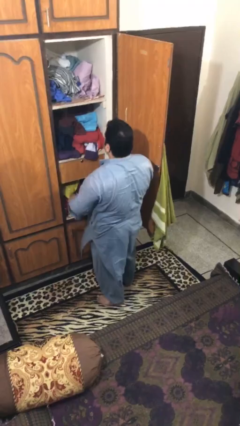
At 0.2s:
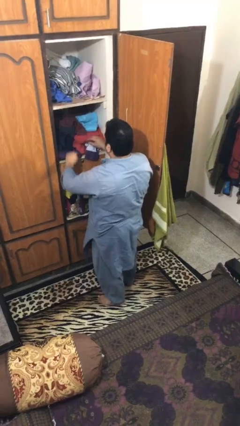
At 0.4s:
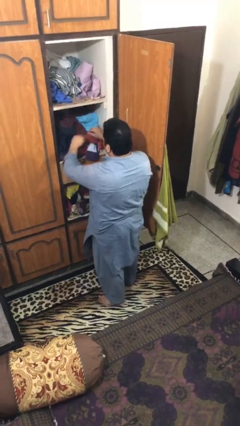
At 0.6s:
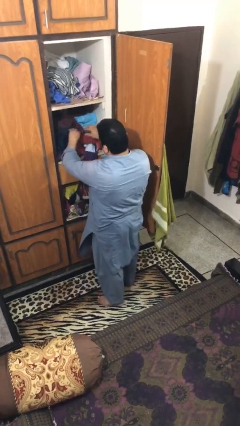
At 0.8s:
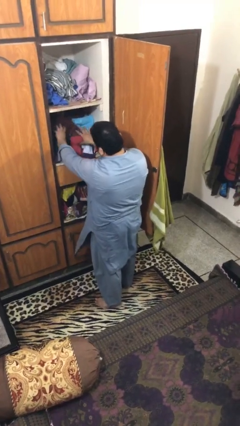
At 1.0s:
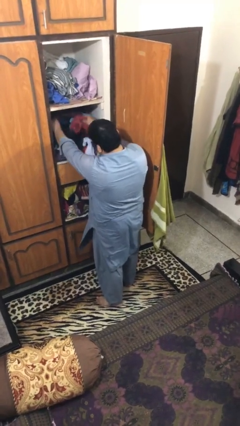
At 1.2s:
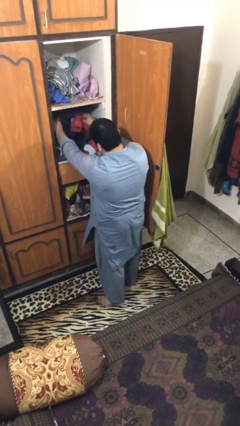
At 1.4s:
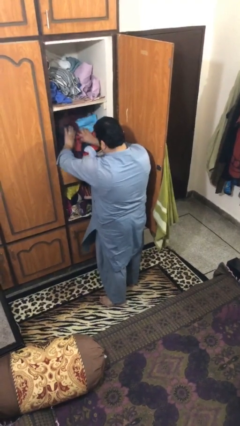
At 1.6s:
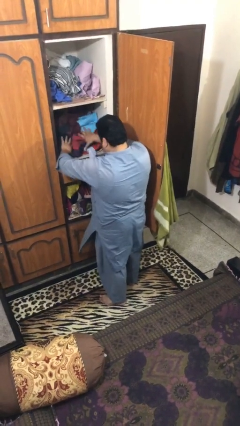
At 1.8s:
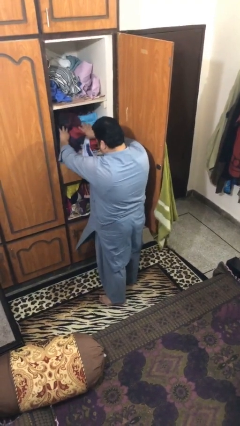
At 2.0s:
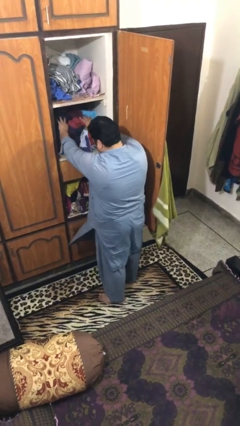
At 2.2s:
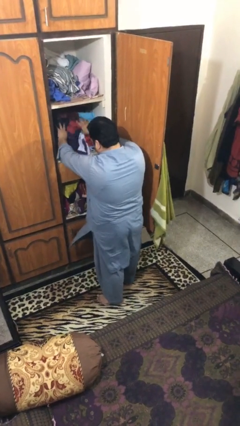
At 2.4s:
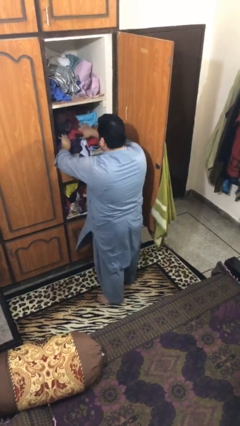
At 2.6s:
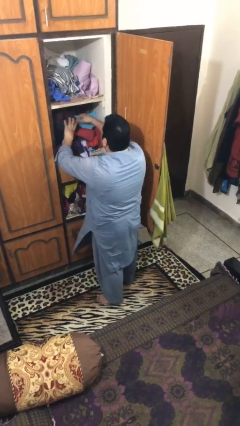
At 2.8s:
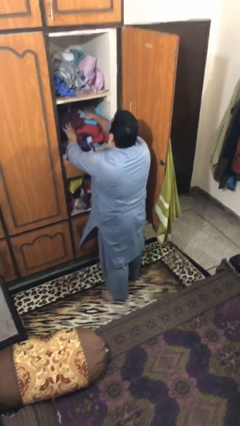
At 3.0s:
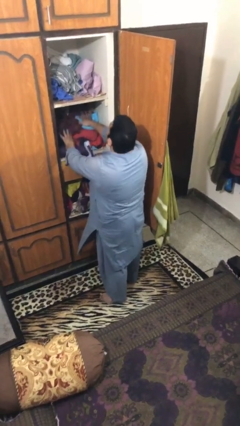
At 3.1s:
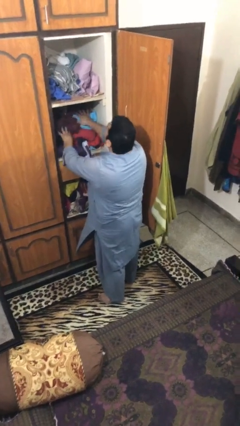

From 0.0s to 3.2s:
person searches in cabinet

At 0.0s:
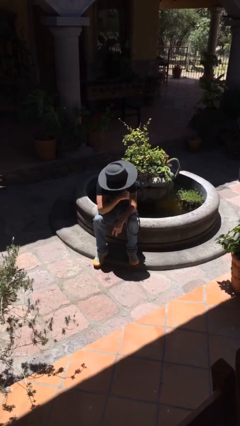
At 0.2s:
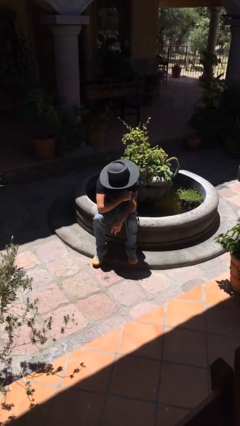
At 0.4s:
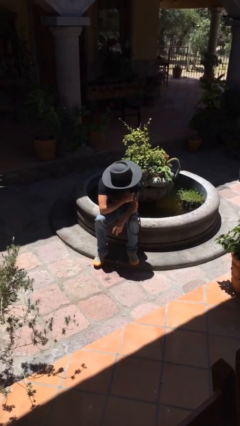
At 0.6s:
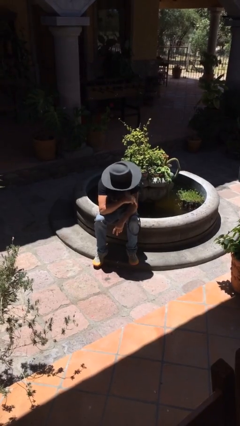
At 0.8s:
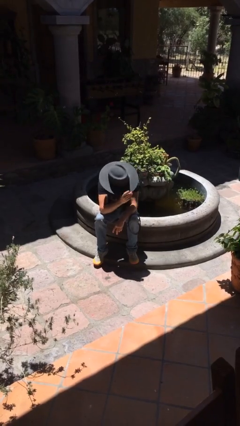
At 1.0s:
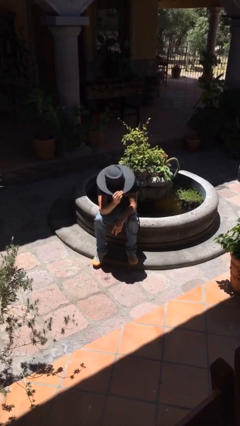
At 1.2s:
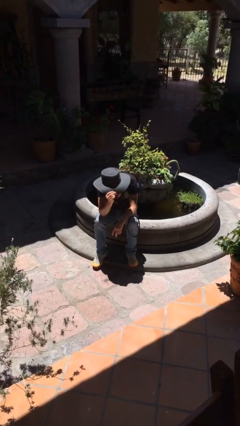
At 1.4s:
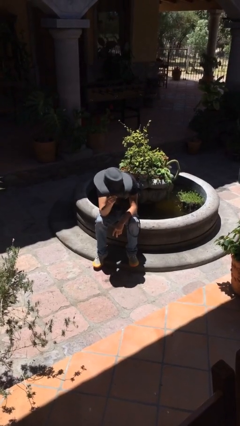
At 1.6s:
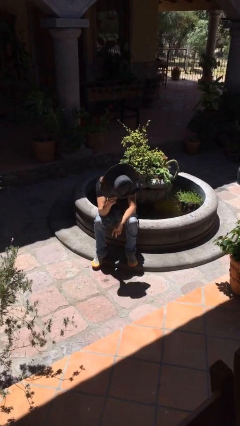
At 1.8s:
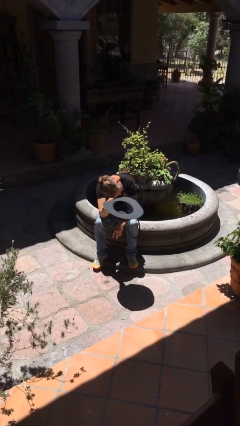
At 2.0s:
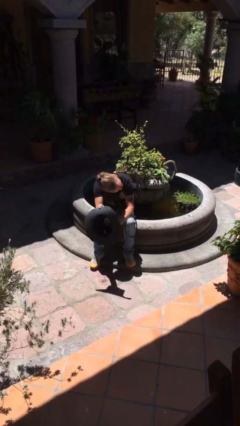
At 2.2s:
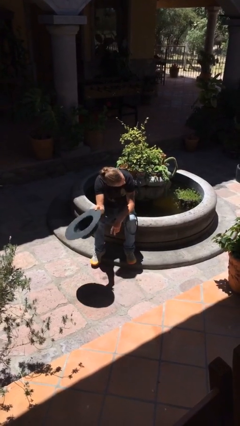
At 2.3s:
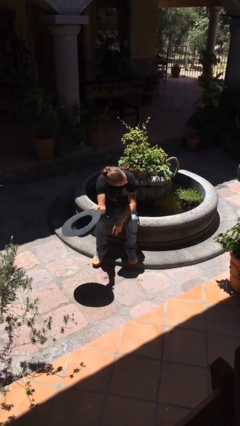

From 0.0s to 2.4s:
person takes off hat

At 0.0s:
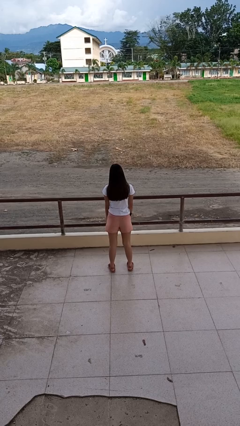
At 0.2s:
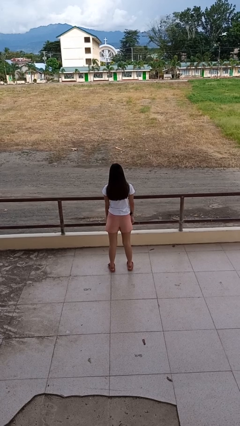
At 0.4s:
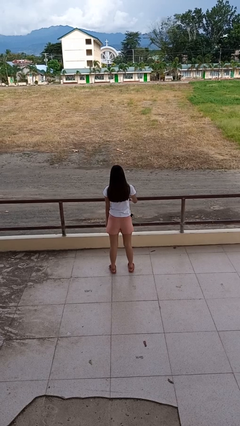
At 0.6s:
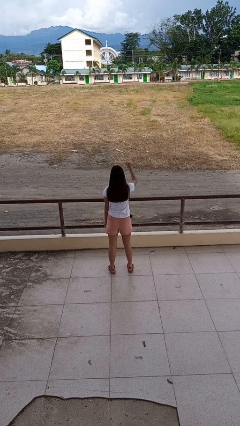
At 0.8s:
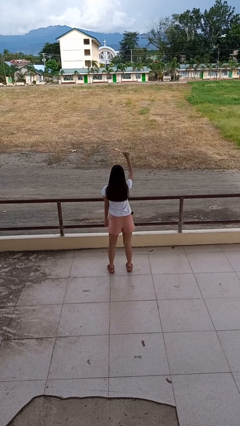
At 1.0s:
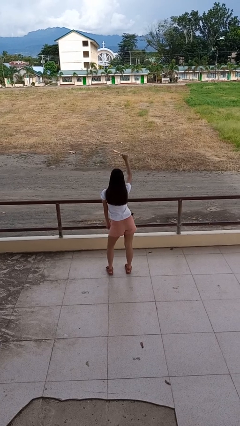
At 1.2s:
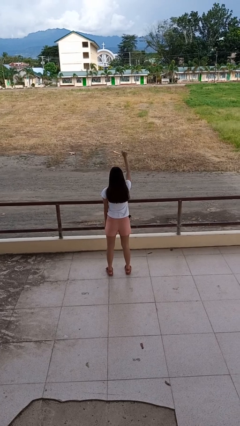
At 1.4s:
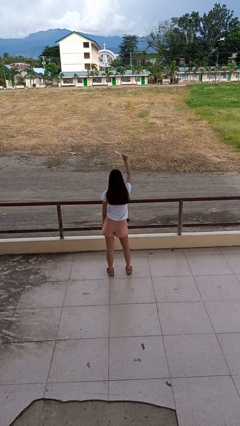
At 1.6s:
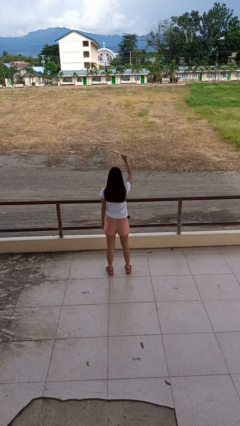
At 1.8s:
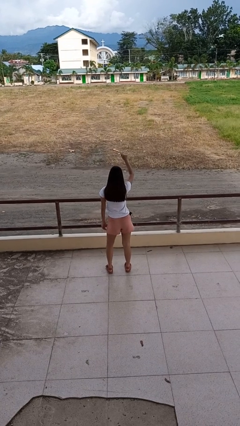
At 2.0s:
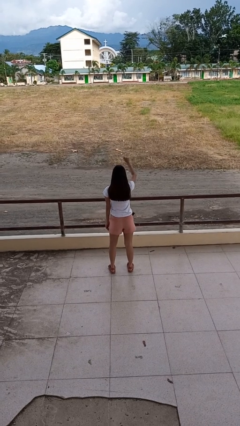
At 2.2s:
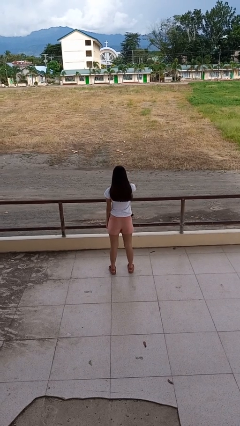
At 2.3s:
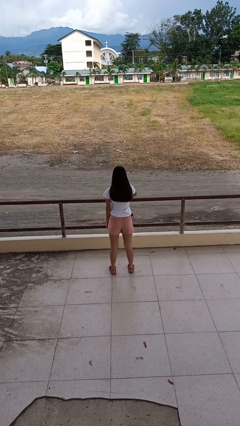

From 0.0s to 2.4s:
person dances in place

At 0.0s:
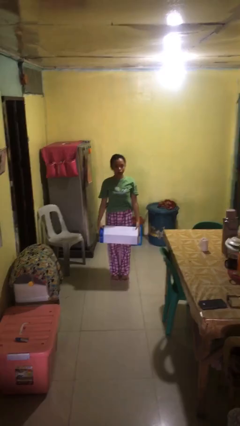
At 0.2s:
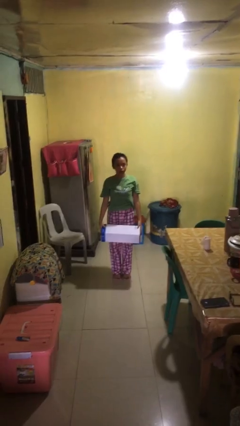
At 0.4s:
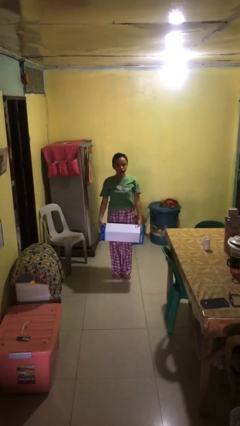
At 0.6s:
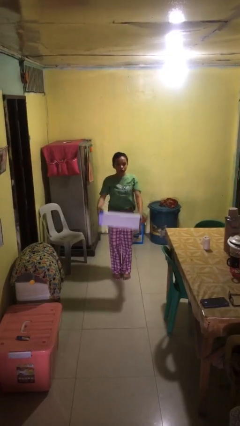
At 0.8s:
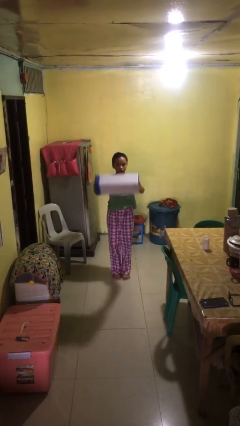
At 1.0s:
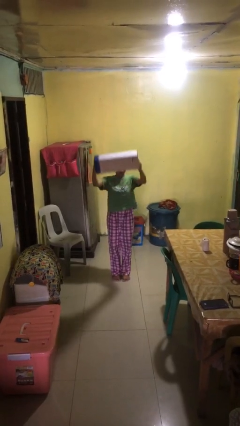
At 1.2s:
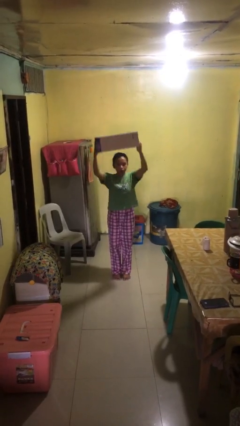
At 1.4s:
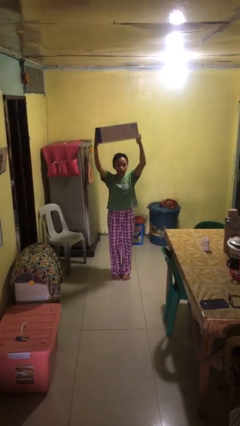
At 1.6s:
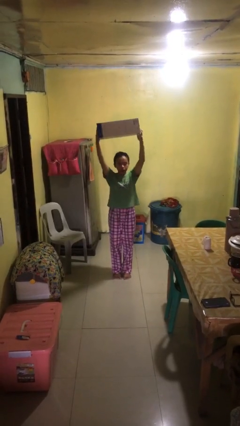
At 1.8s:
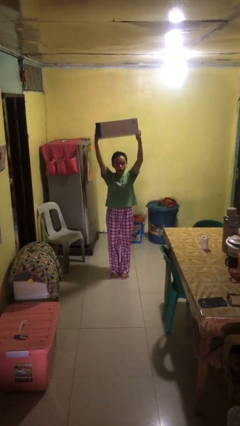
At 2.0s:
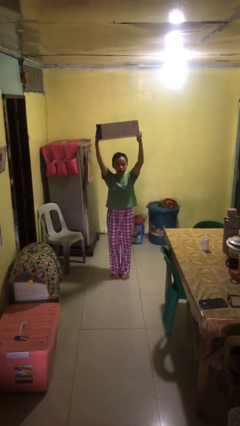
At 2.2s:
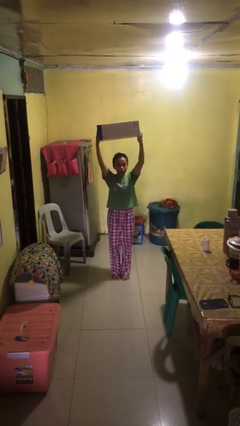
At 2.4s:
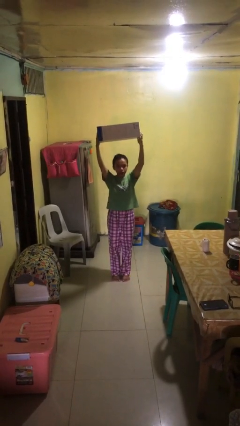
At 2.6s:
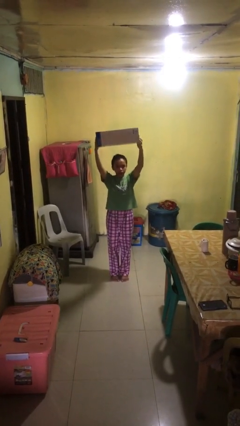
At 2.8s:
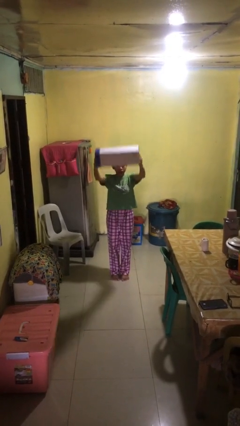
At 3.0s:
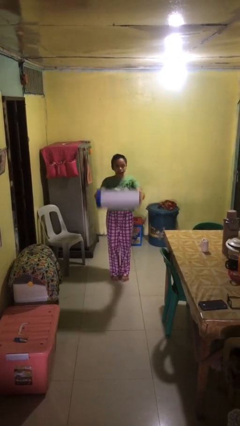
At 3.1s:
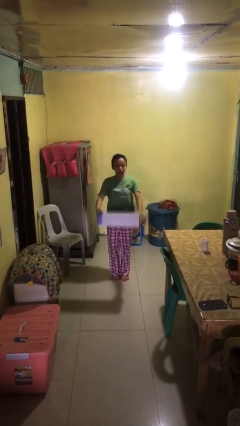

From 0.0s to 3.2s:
person holds object above head

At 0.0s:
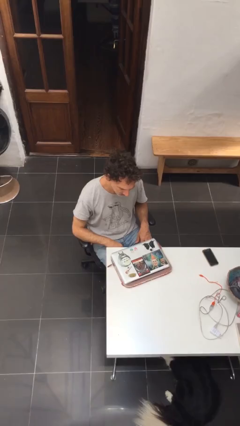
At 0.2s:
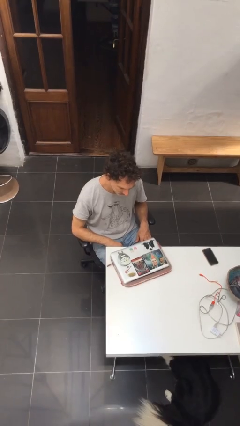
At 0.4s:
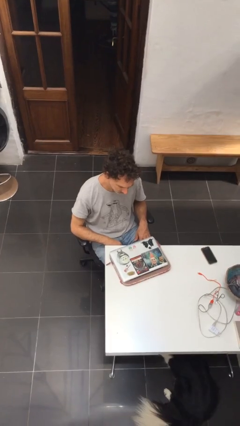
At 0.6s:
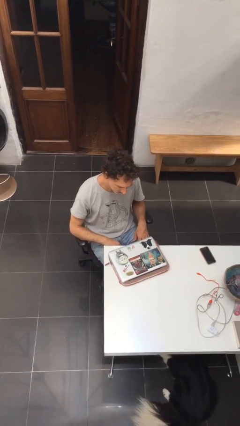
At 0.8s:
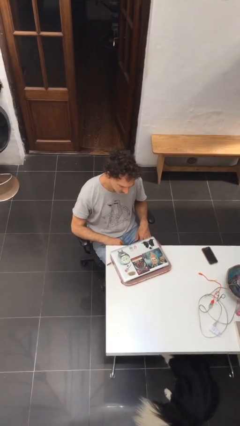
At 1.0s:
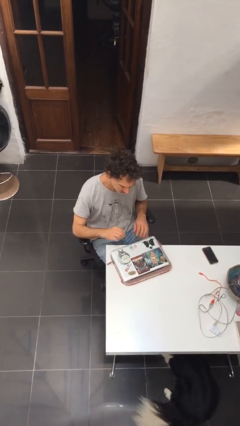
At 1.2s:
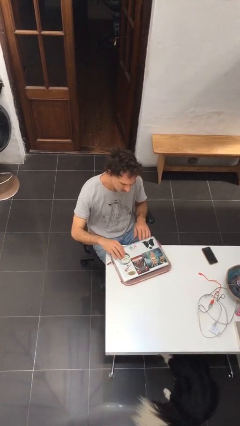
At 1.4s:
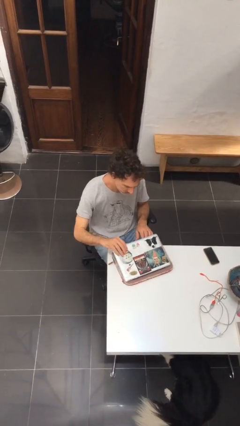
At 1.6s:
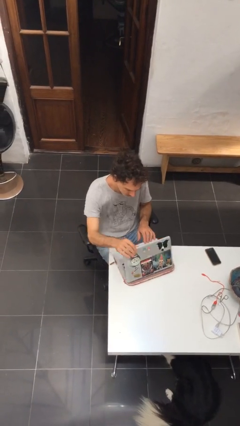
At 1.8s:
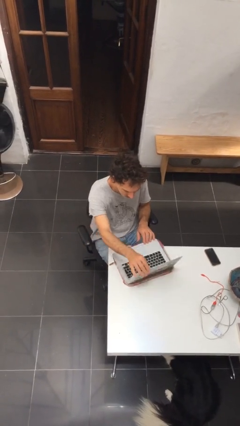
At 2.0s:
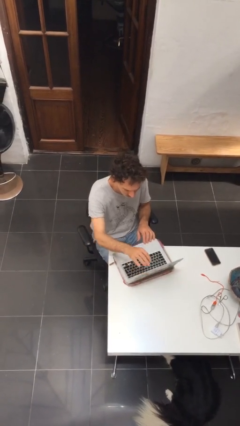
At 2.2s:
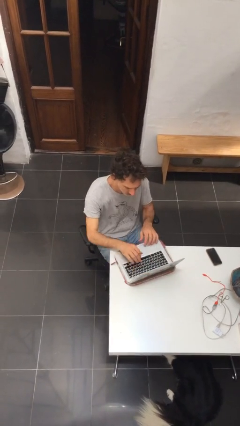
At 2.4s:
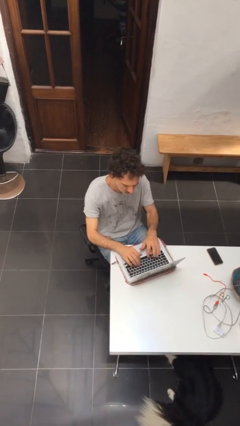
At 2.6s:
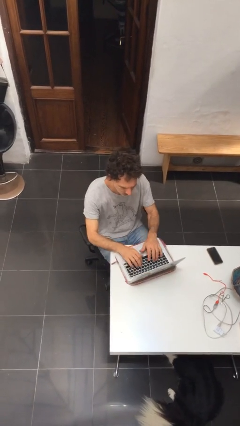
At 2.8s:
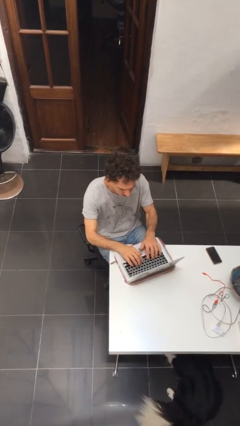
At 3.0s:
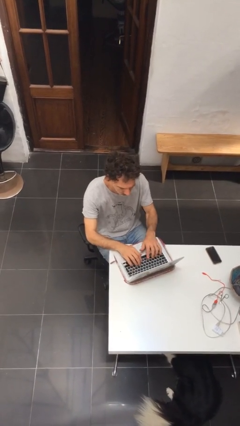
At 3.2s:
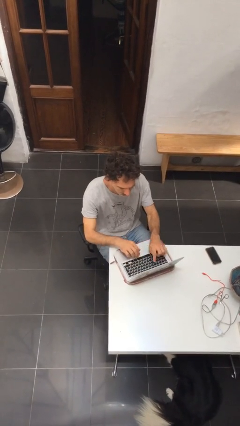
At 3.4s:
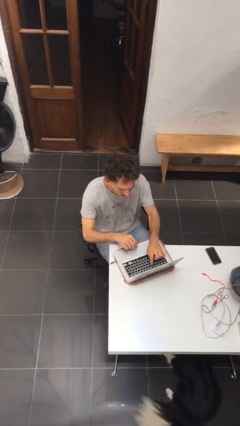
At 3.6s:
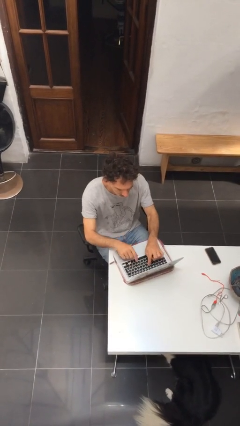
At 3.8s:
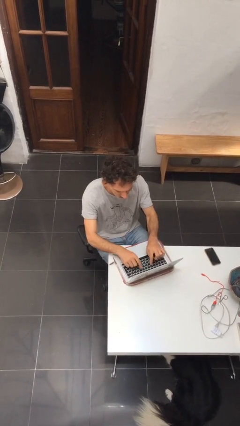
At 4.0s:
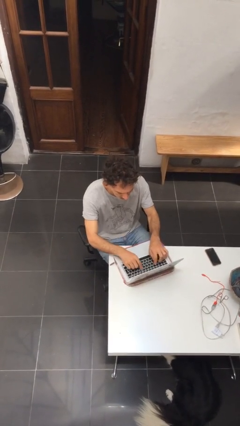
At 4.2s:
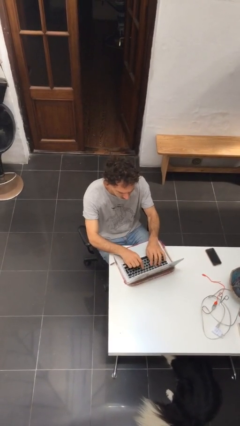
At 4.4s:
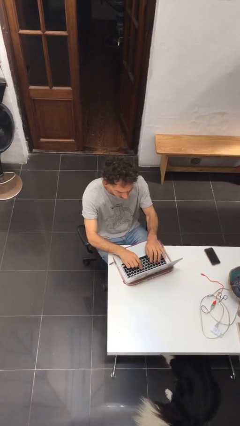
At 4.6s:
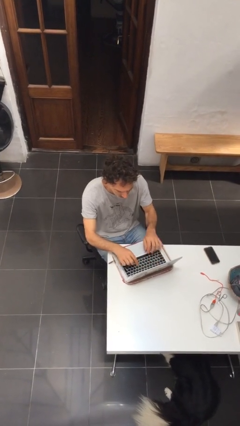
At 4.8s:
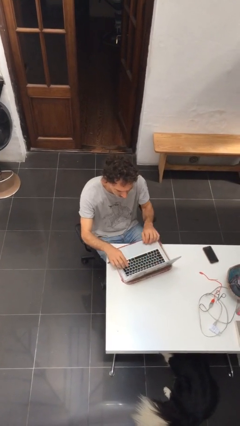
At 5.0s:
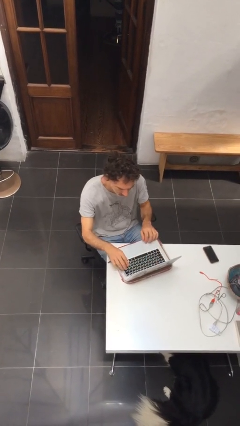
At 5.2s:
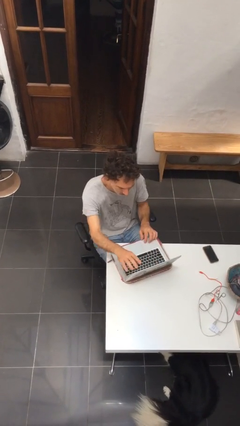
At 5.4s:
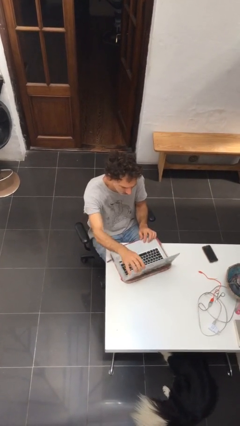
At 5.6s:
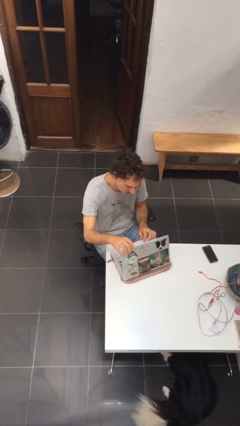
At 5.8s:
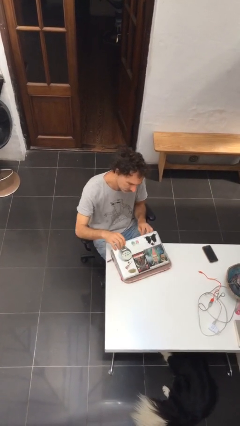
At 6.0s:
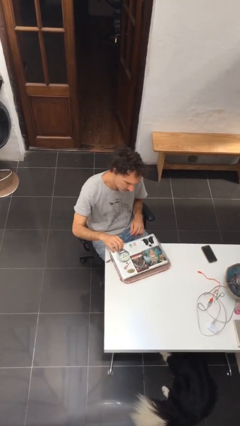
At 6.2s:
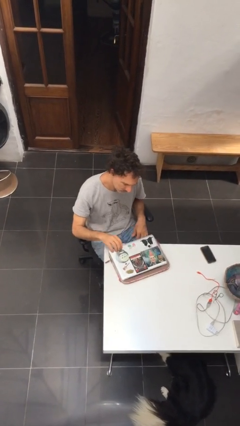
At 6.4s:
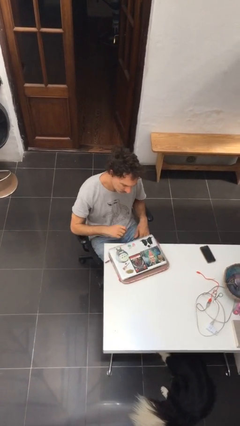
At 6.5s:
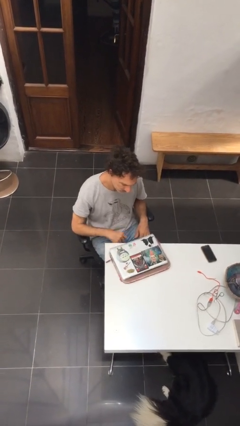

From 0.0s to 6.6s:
person interacts with laptop
